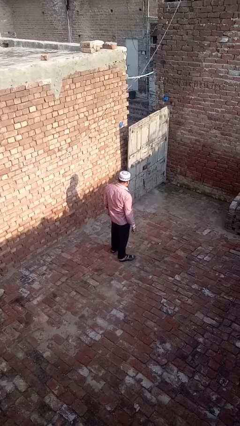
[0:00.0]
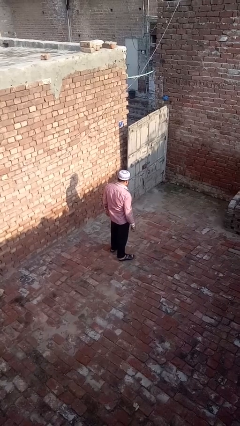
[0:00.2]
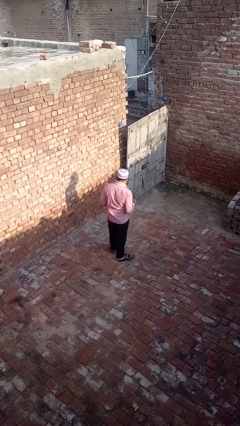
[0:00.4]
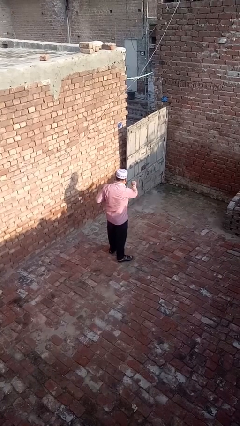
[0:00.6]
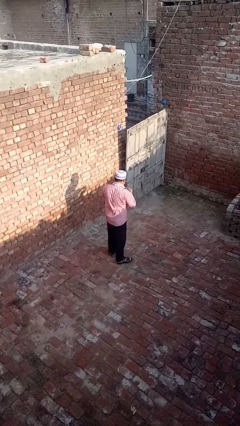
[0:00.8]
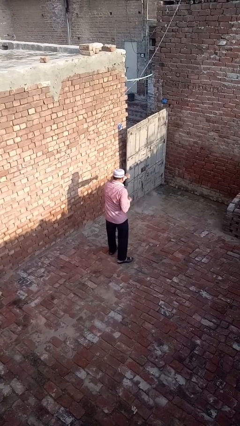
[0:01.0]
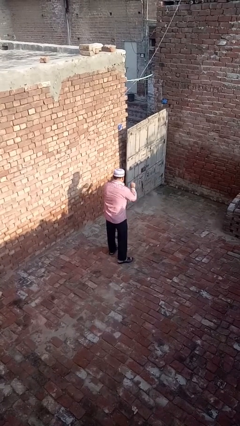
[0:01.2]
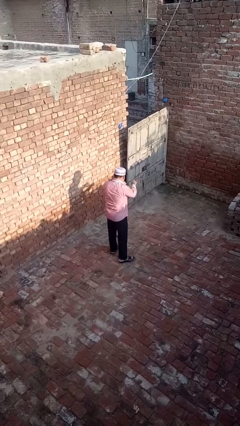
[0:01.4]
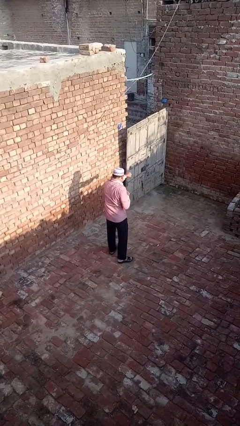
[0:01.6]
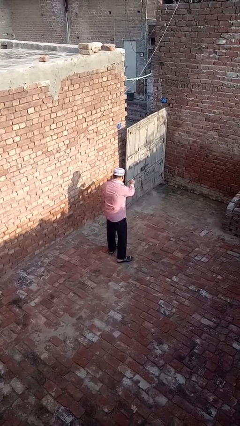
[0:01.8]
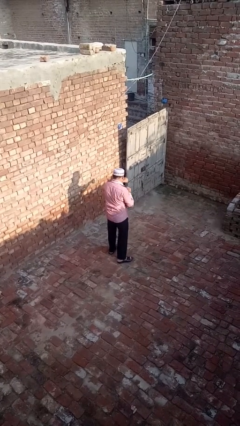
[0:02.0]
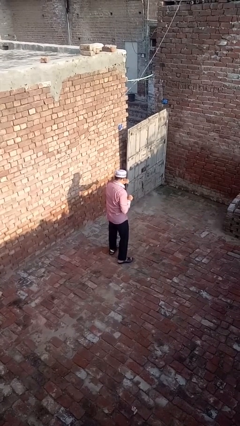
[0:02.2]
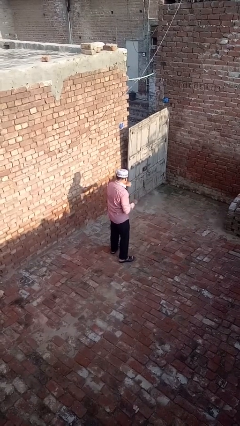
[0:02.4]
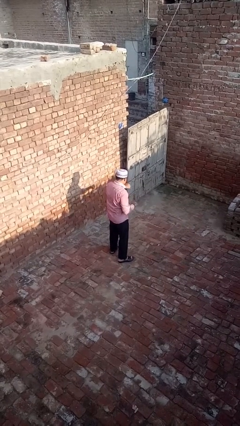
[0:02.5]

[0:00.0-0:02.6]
person punches

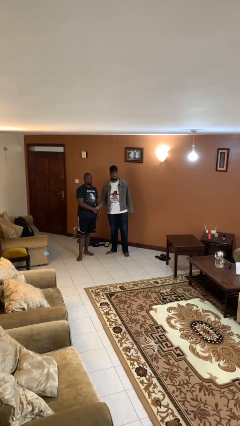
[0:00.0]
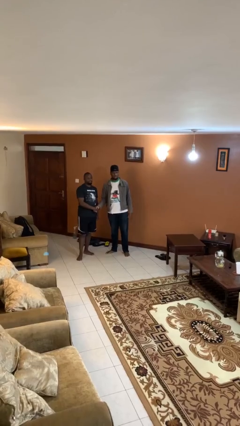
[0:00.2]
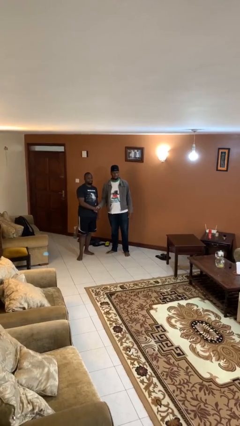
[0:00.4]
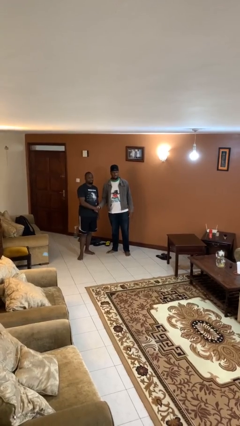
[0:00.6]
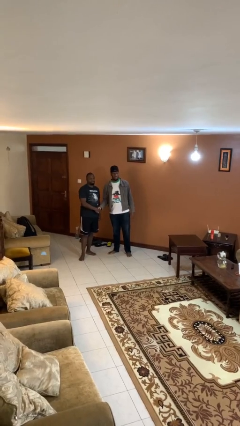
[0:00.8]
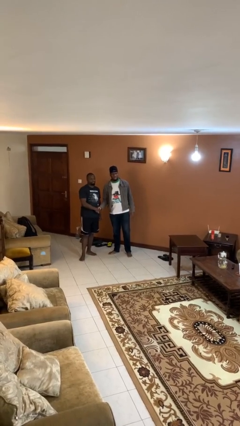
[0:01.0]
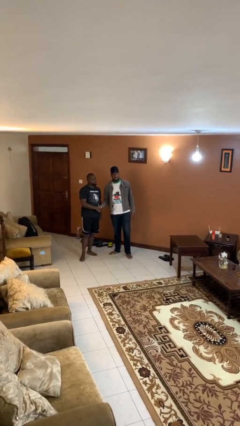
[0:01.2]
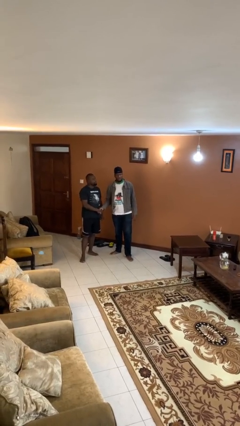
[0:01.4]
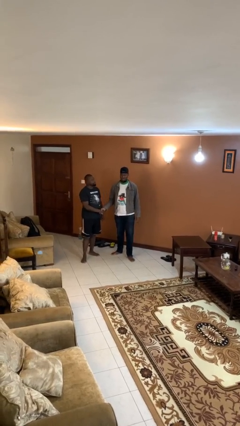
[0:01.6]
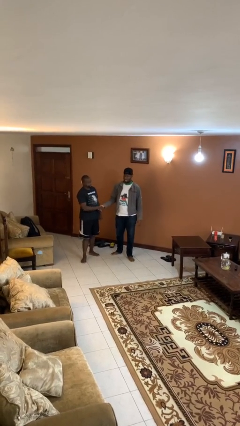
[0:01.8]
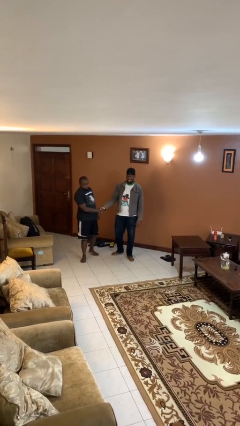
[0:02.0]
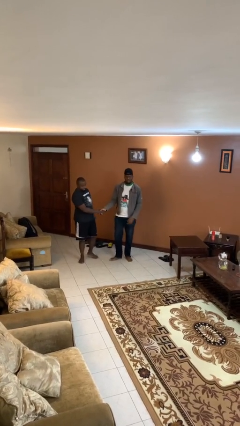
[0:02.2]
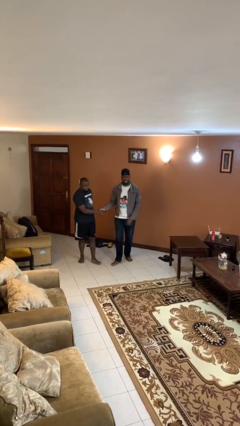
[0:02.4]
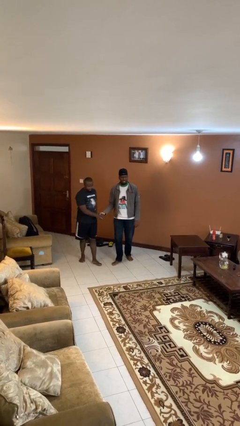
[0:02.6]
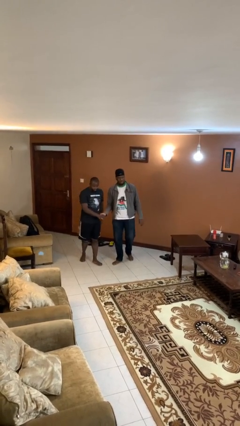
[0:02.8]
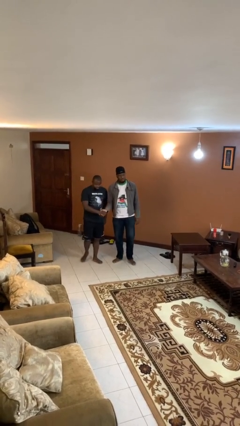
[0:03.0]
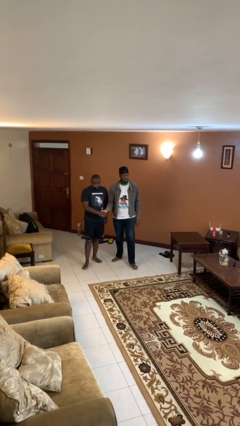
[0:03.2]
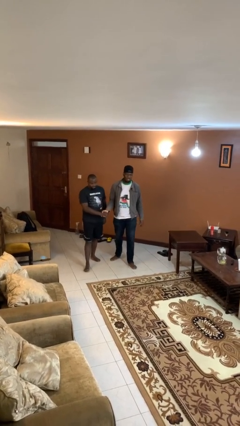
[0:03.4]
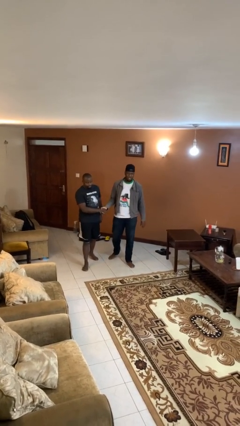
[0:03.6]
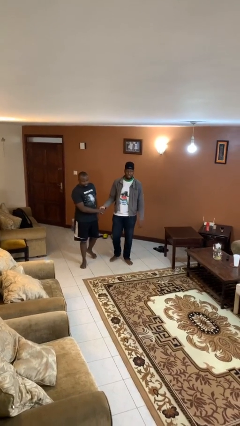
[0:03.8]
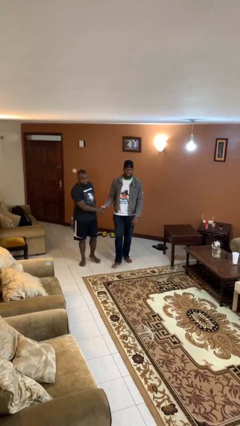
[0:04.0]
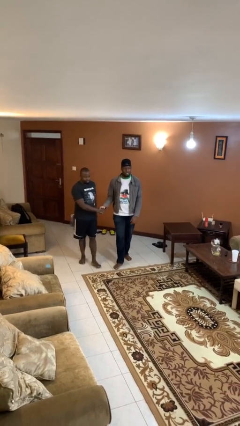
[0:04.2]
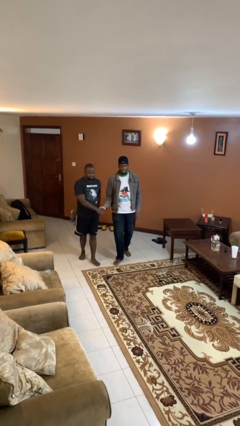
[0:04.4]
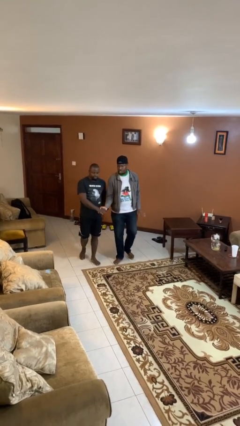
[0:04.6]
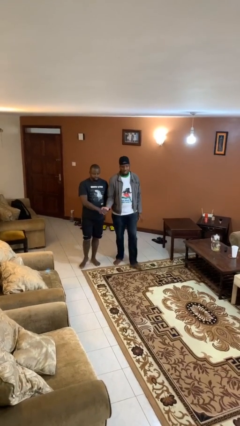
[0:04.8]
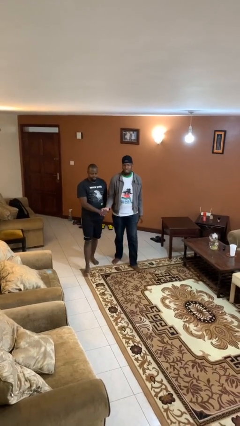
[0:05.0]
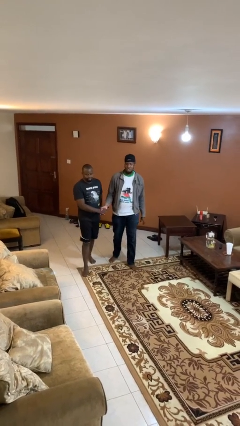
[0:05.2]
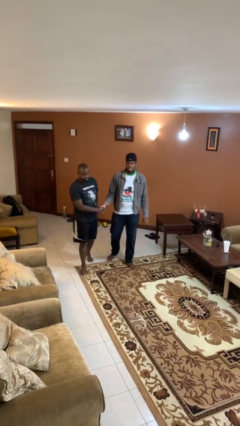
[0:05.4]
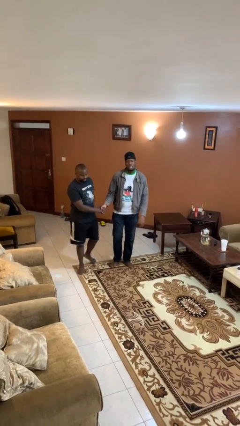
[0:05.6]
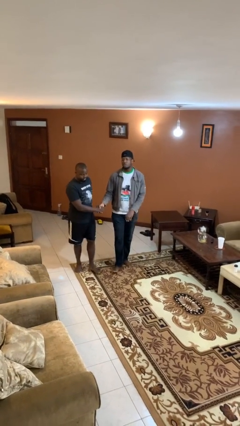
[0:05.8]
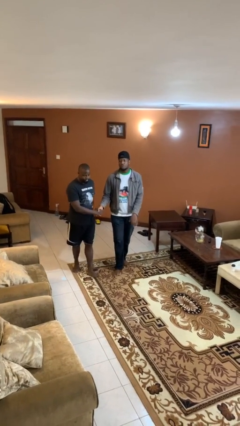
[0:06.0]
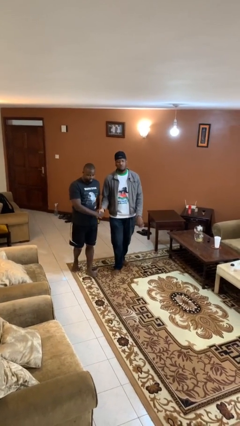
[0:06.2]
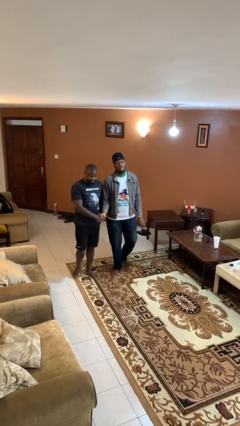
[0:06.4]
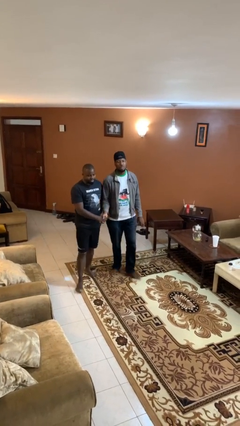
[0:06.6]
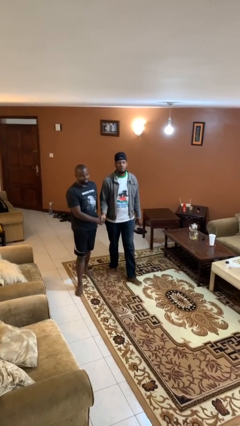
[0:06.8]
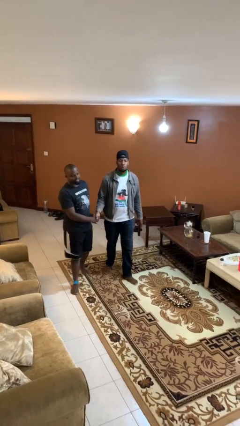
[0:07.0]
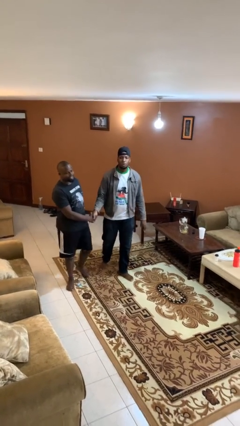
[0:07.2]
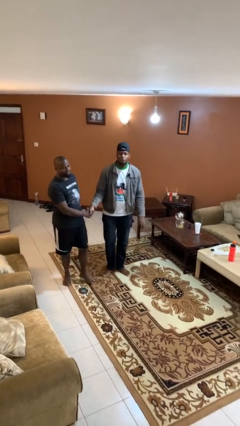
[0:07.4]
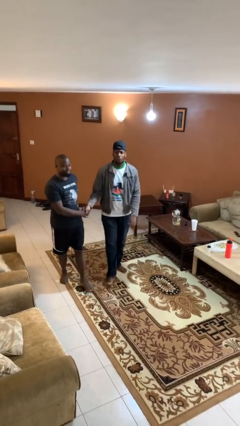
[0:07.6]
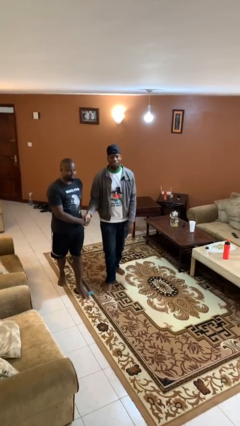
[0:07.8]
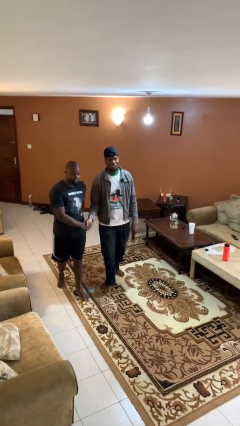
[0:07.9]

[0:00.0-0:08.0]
person holds hand

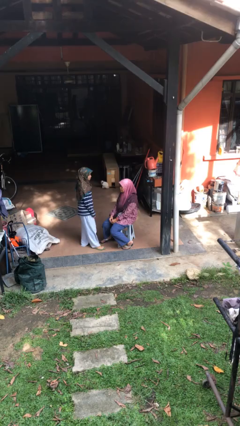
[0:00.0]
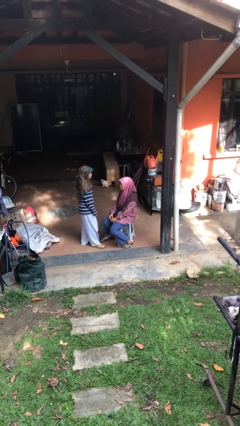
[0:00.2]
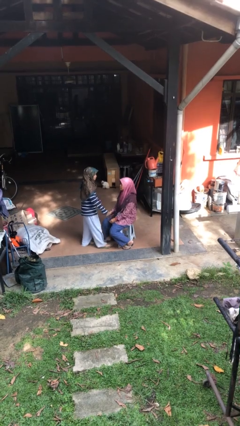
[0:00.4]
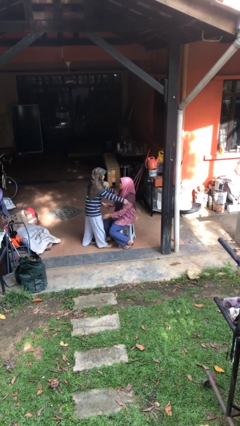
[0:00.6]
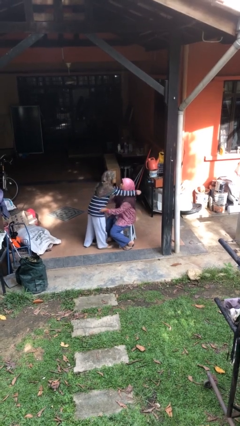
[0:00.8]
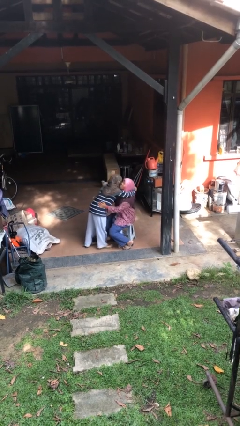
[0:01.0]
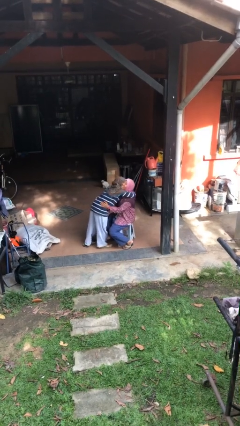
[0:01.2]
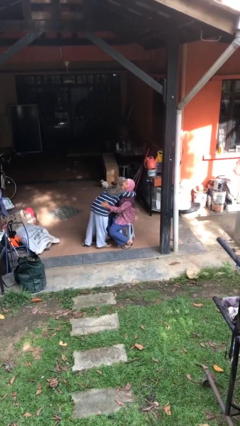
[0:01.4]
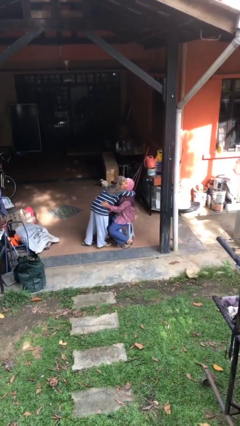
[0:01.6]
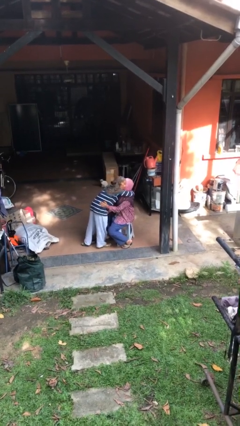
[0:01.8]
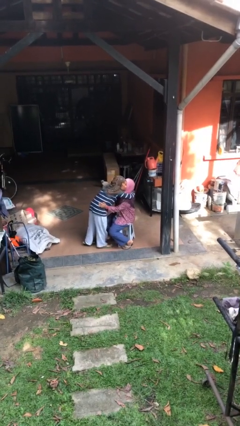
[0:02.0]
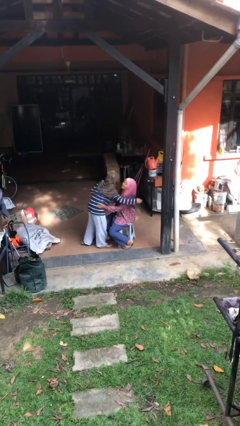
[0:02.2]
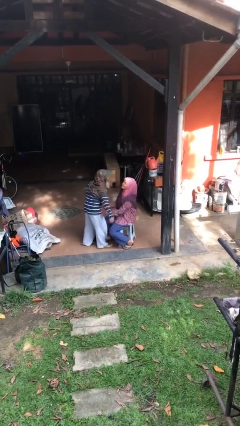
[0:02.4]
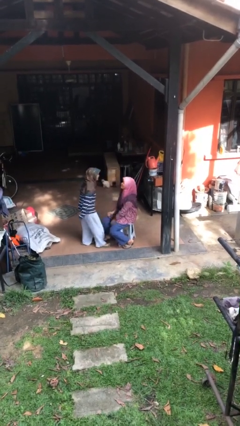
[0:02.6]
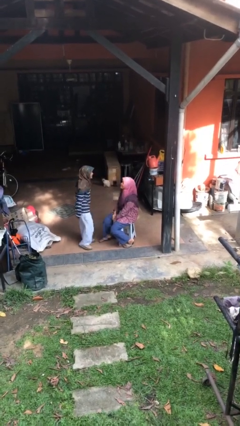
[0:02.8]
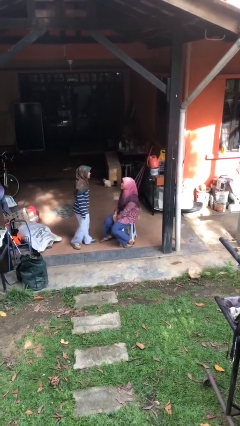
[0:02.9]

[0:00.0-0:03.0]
person embraces person

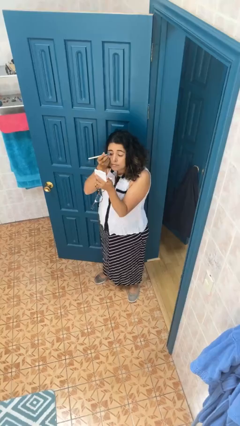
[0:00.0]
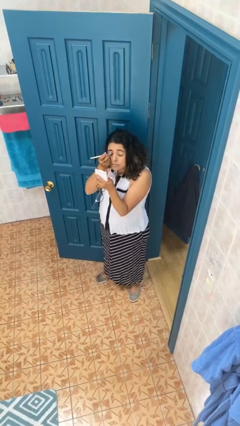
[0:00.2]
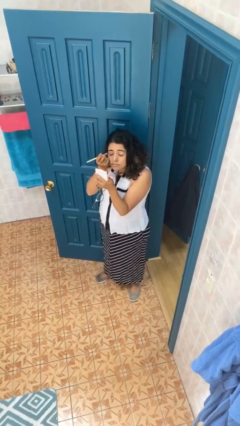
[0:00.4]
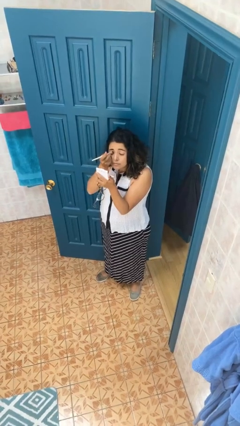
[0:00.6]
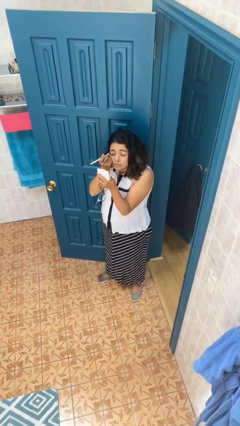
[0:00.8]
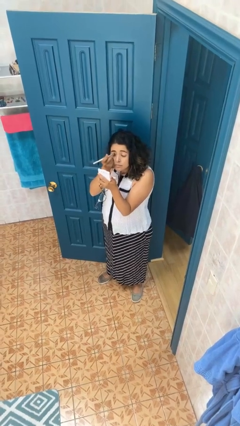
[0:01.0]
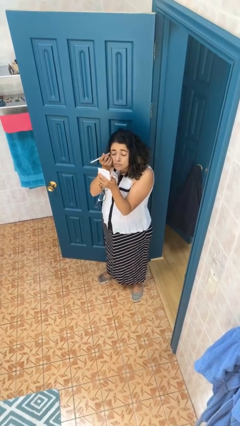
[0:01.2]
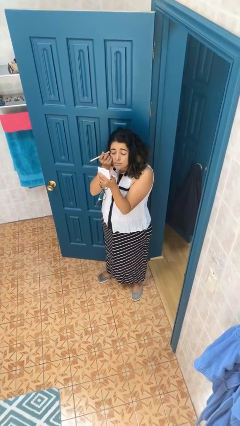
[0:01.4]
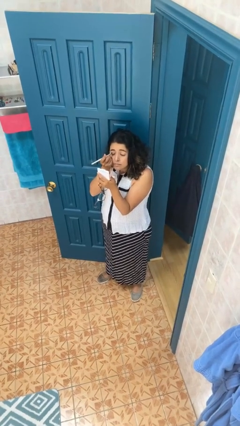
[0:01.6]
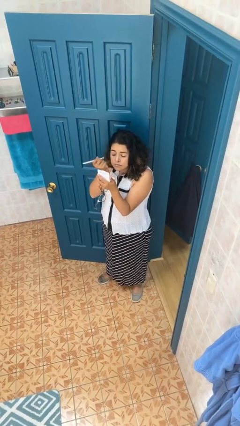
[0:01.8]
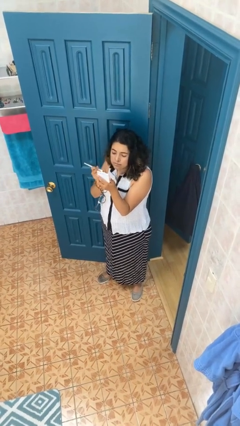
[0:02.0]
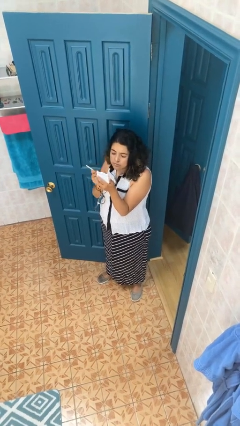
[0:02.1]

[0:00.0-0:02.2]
person applies eye makeup

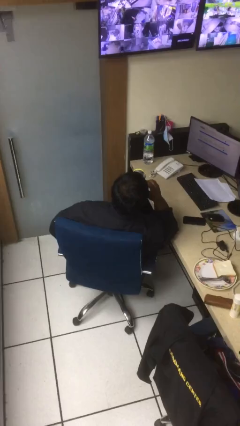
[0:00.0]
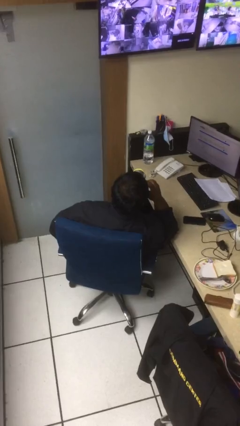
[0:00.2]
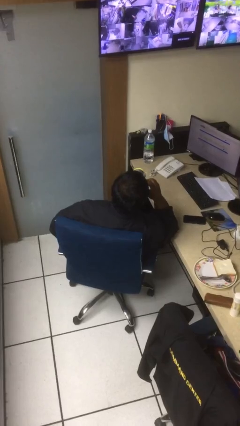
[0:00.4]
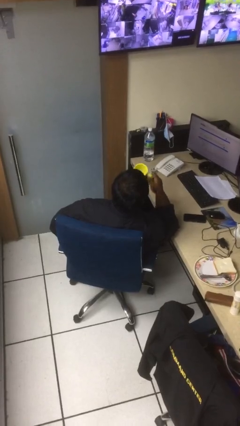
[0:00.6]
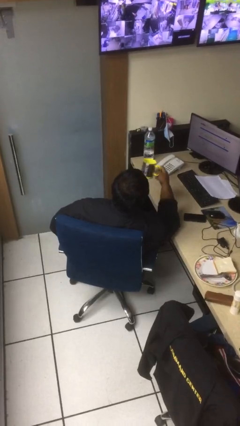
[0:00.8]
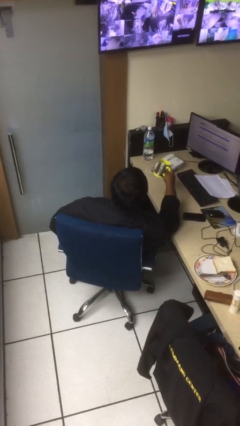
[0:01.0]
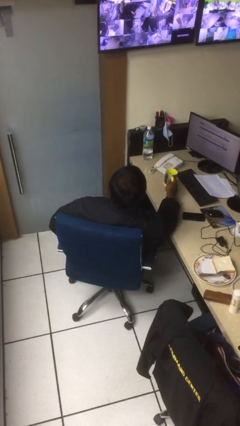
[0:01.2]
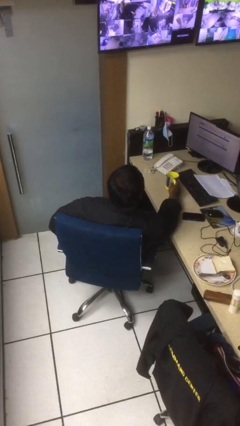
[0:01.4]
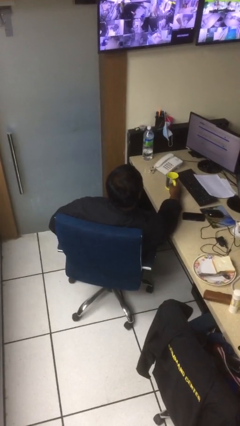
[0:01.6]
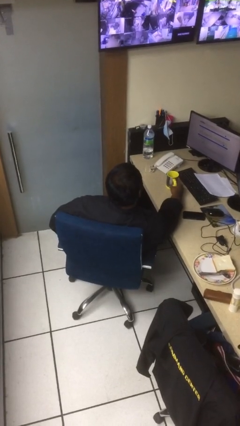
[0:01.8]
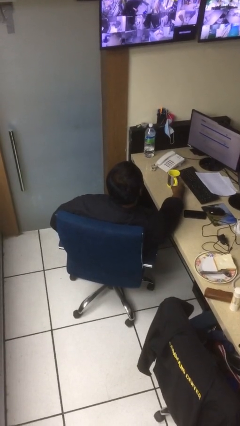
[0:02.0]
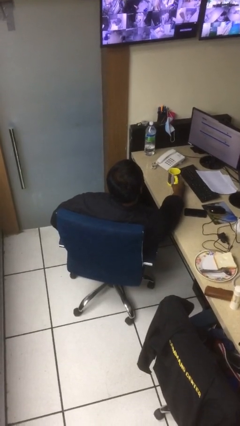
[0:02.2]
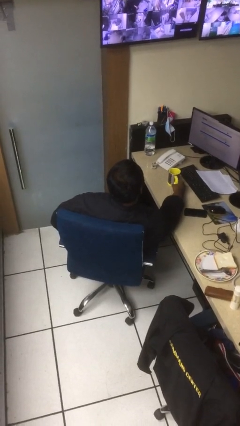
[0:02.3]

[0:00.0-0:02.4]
person puts down object on table
